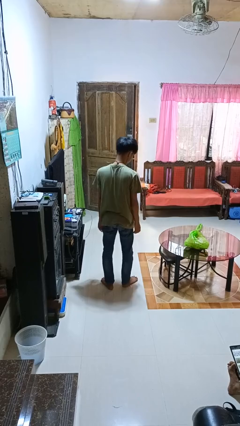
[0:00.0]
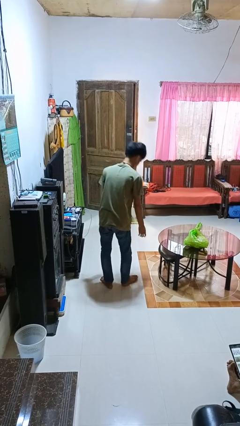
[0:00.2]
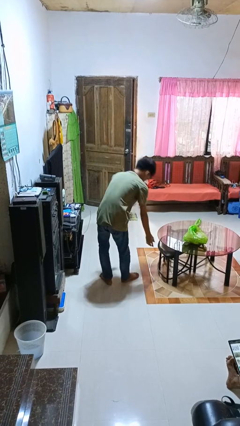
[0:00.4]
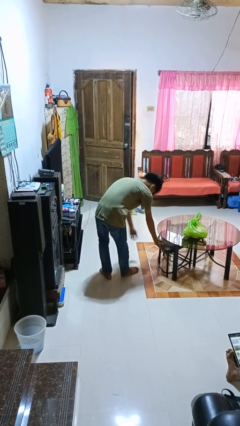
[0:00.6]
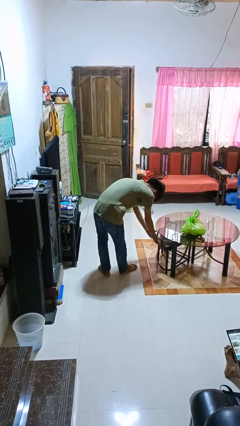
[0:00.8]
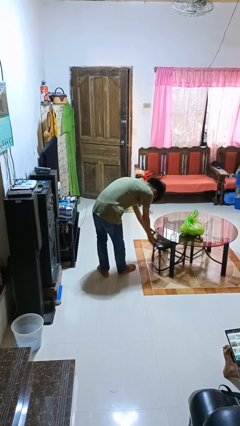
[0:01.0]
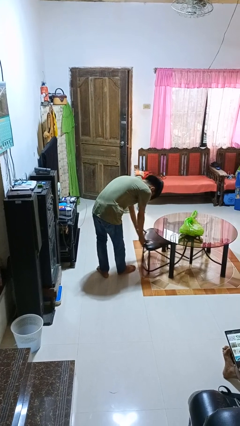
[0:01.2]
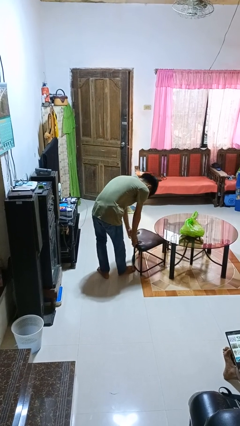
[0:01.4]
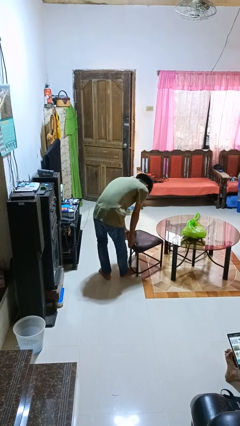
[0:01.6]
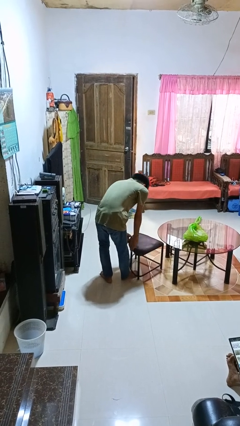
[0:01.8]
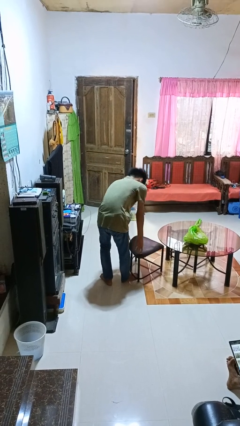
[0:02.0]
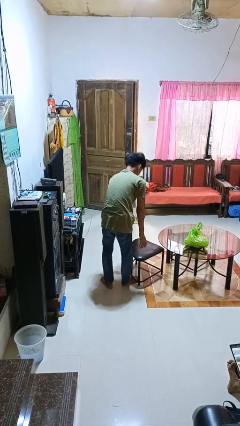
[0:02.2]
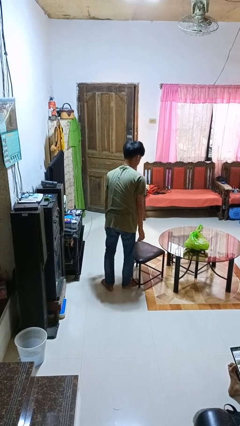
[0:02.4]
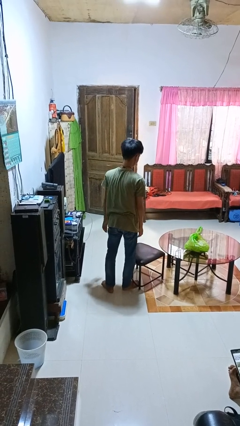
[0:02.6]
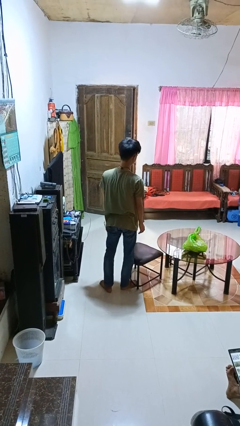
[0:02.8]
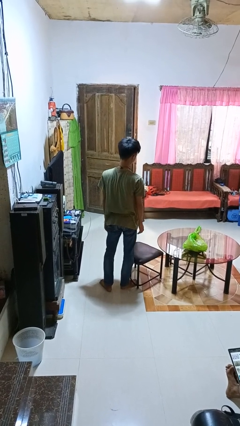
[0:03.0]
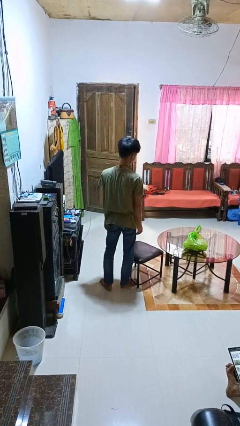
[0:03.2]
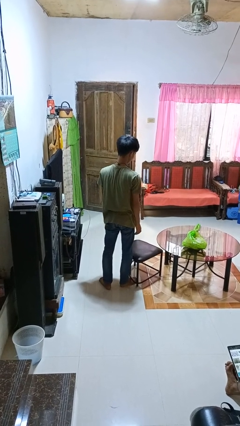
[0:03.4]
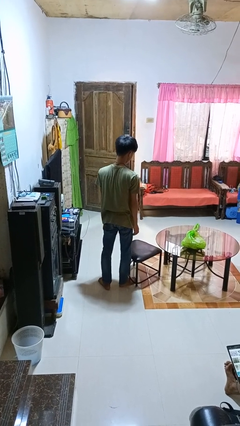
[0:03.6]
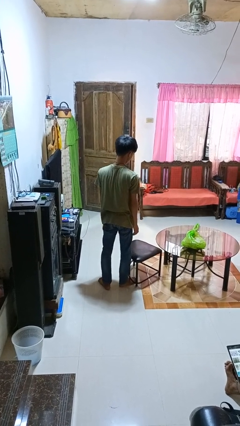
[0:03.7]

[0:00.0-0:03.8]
person pulls out chair

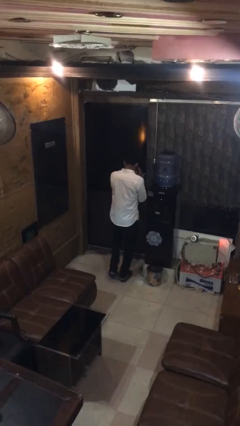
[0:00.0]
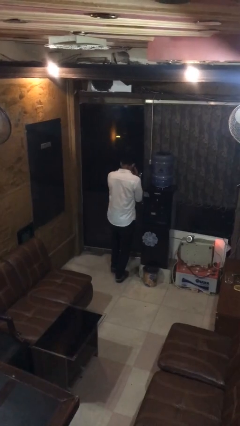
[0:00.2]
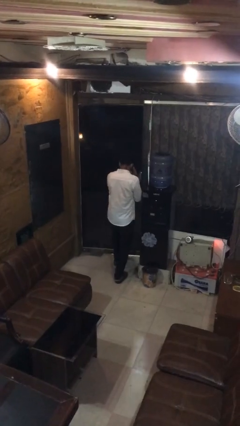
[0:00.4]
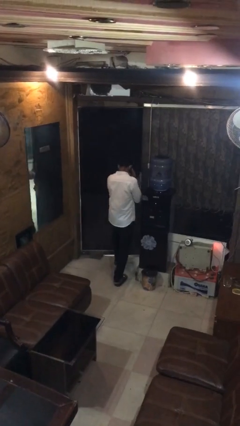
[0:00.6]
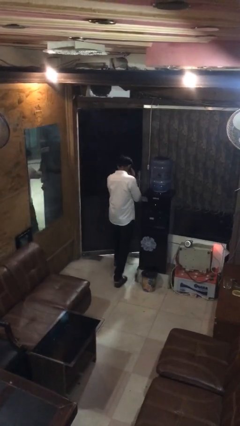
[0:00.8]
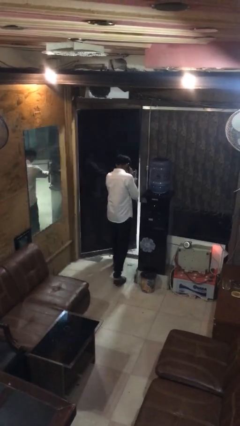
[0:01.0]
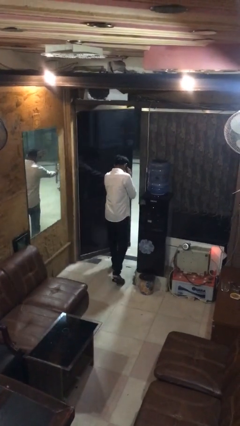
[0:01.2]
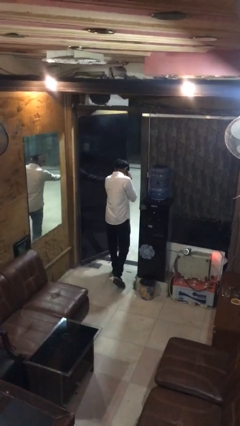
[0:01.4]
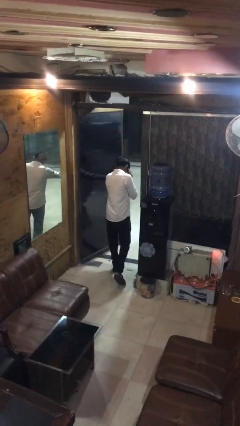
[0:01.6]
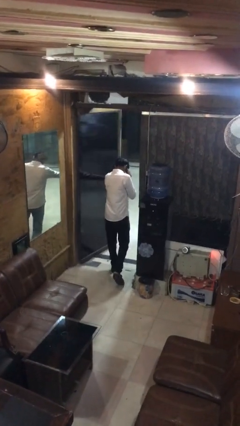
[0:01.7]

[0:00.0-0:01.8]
person opens facility door

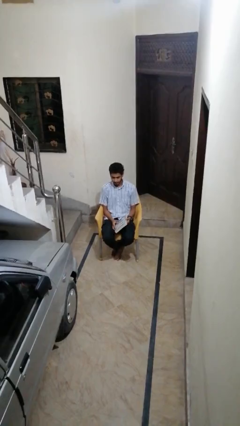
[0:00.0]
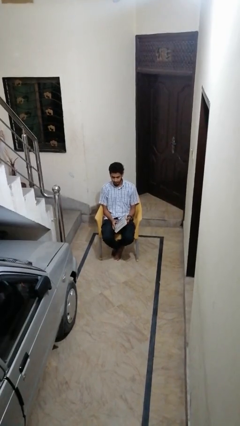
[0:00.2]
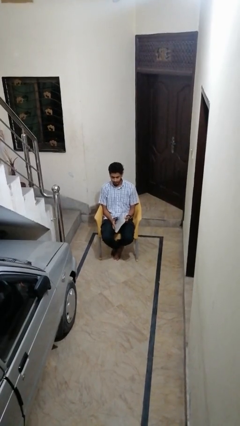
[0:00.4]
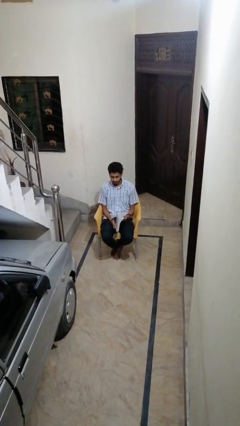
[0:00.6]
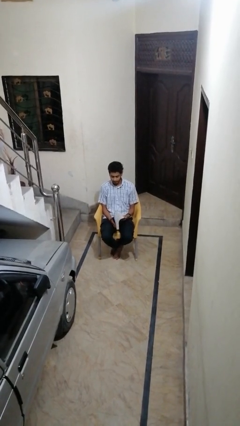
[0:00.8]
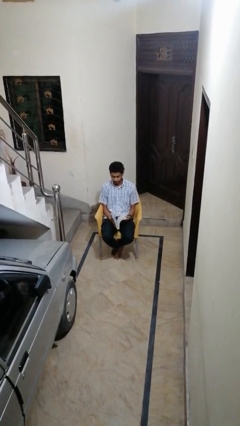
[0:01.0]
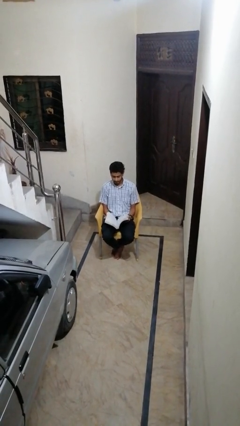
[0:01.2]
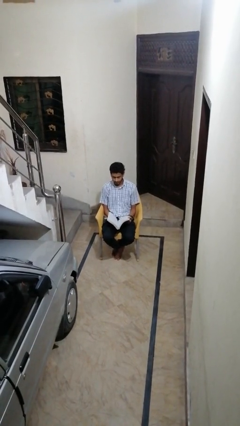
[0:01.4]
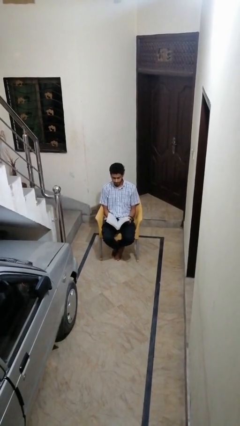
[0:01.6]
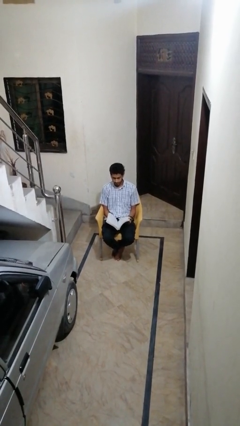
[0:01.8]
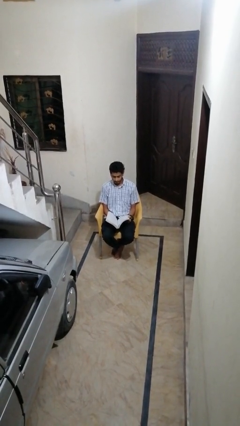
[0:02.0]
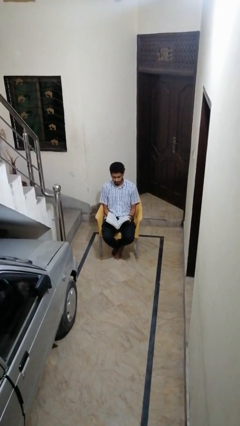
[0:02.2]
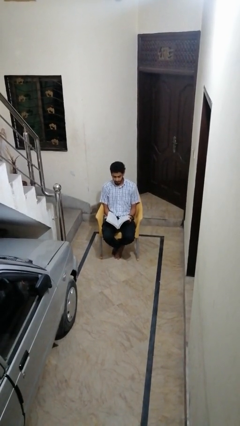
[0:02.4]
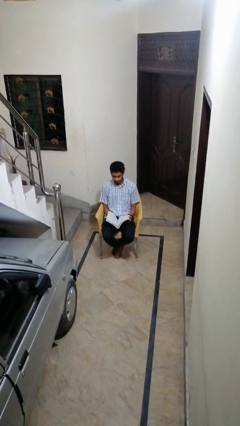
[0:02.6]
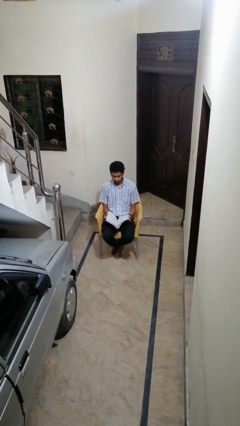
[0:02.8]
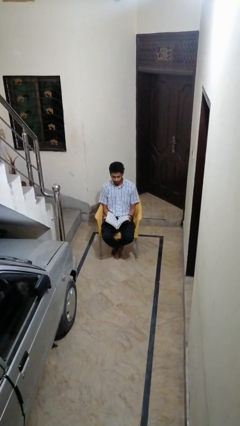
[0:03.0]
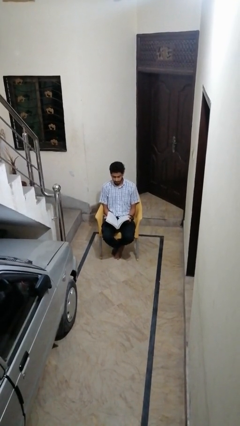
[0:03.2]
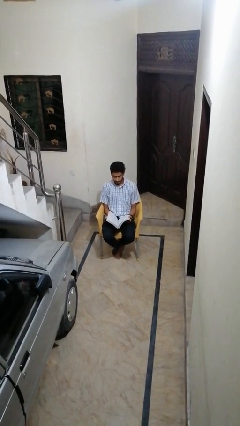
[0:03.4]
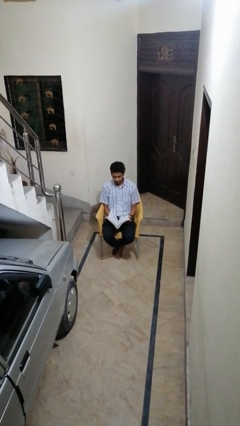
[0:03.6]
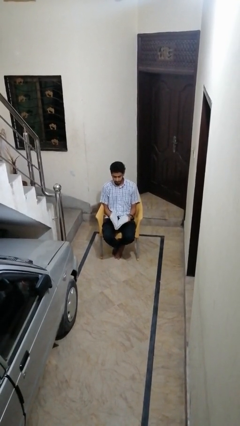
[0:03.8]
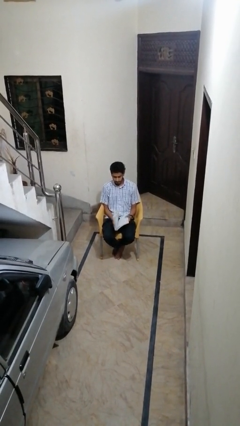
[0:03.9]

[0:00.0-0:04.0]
person reads book

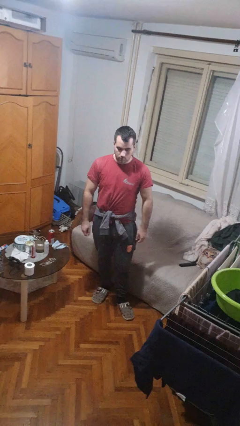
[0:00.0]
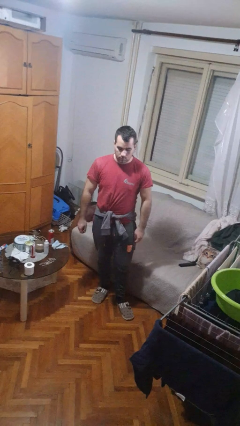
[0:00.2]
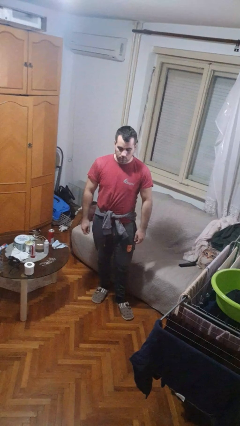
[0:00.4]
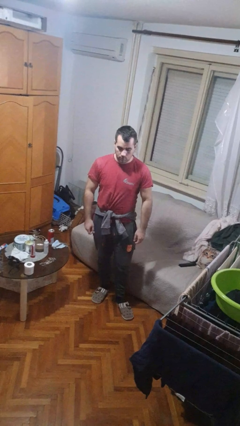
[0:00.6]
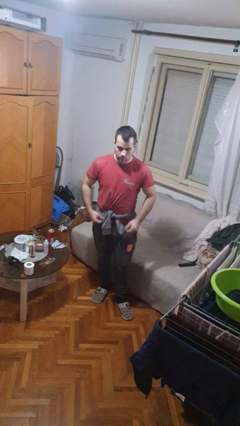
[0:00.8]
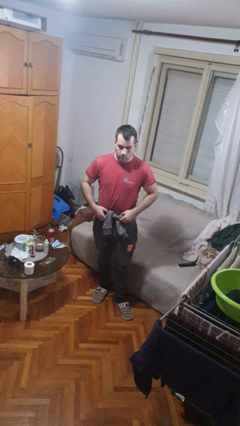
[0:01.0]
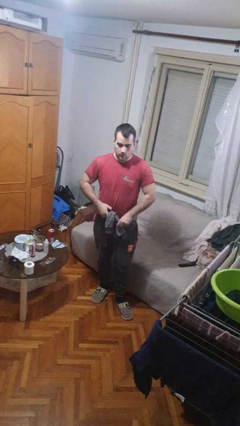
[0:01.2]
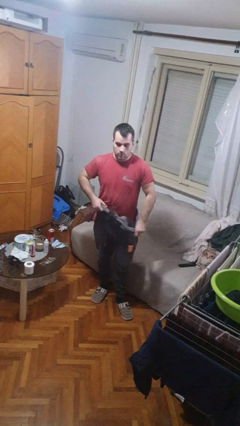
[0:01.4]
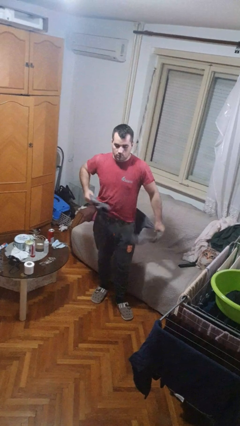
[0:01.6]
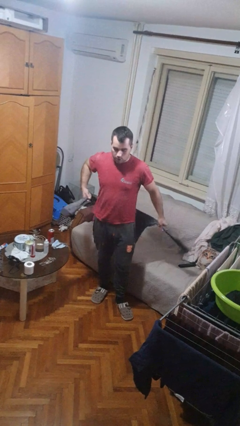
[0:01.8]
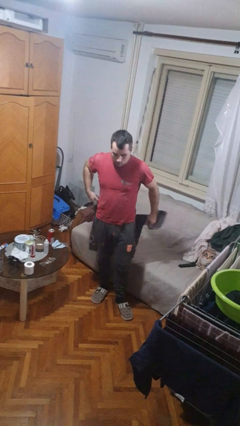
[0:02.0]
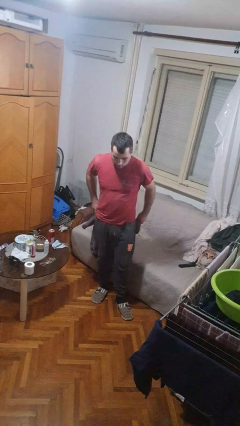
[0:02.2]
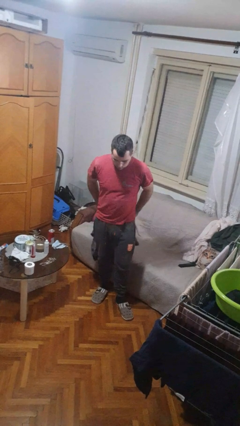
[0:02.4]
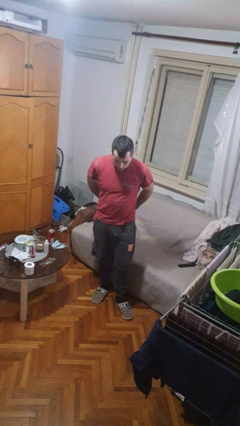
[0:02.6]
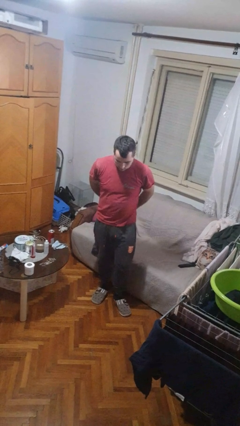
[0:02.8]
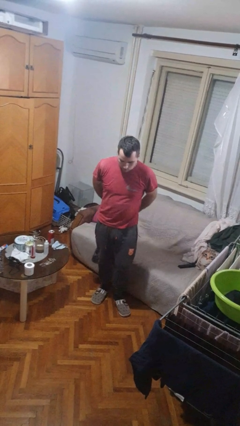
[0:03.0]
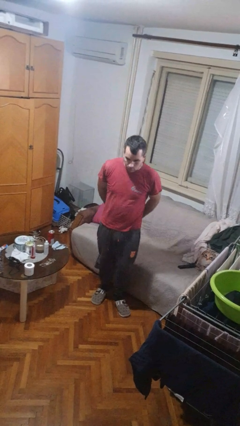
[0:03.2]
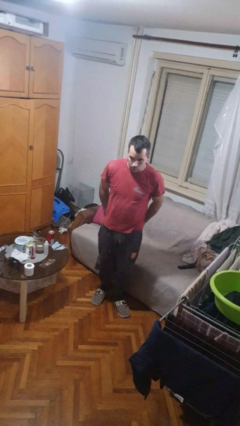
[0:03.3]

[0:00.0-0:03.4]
person unties jacket around waist

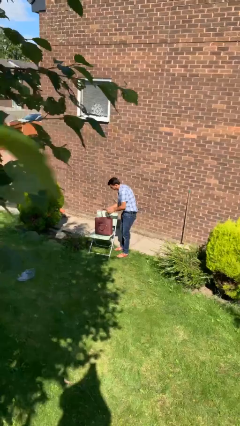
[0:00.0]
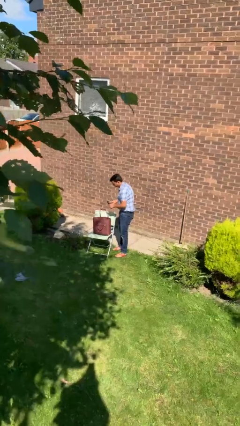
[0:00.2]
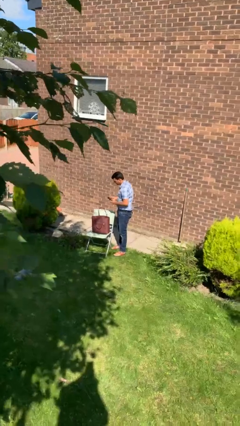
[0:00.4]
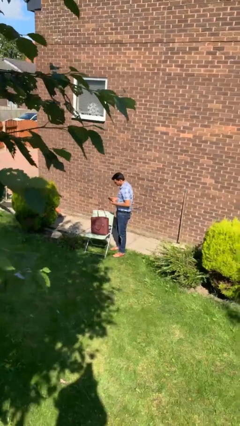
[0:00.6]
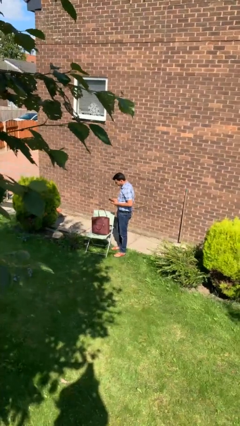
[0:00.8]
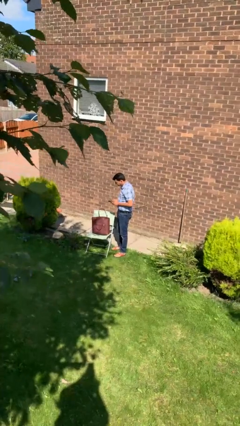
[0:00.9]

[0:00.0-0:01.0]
person takes object from purse

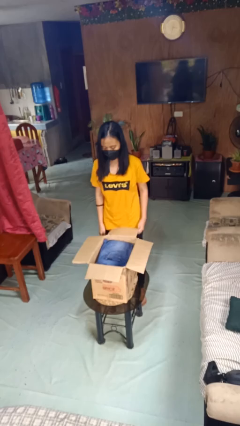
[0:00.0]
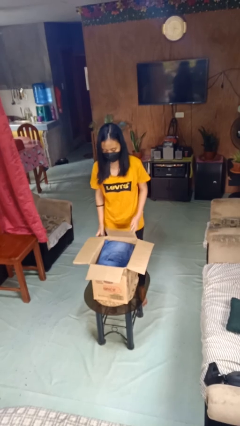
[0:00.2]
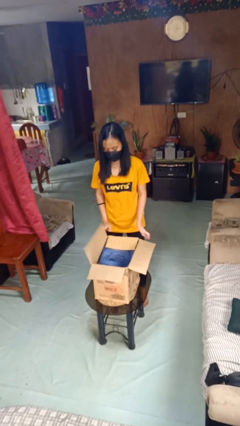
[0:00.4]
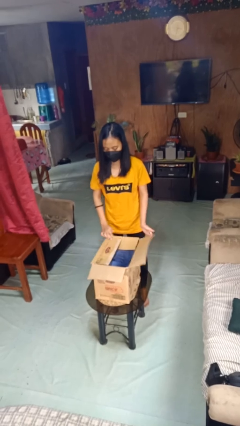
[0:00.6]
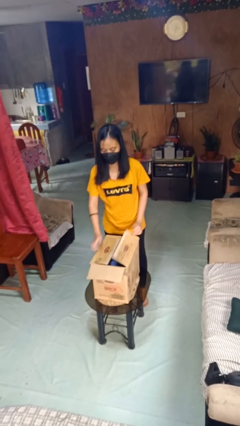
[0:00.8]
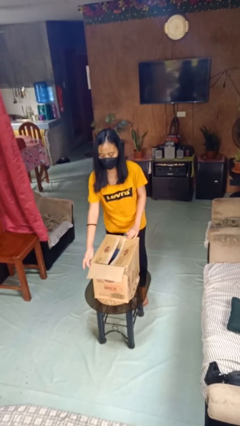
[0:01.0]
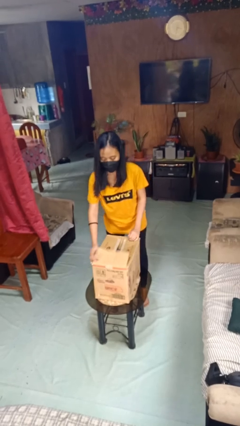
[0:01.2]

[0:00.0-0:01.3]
person closes box

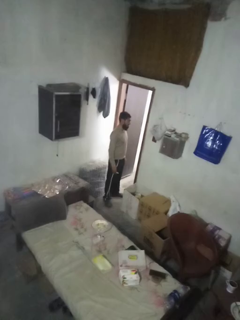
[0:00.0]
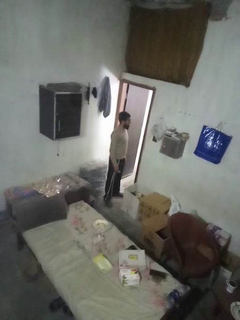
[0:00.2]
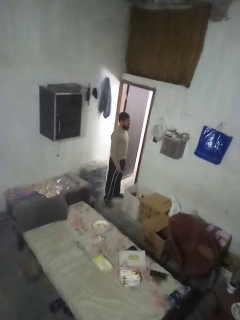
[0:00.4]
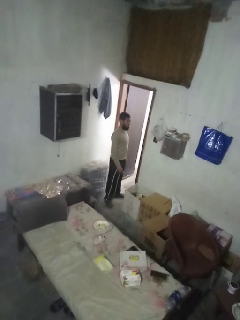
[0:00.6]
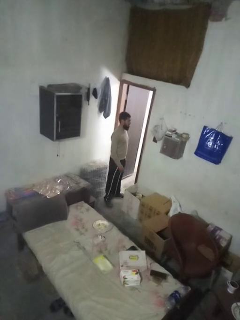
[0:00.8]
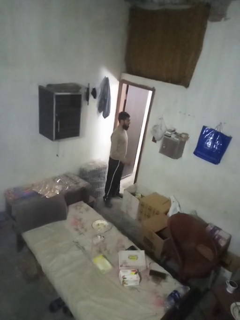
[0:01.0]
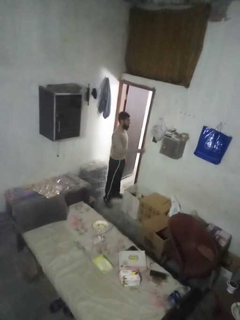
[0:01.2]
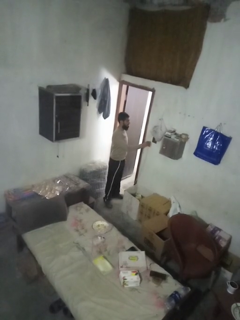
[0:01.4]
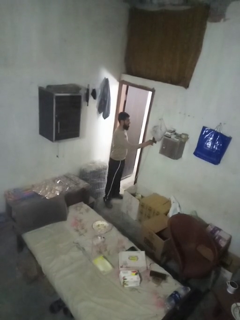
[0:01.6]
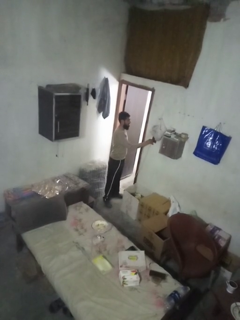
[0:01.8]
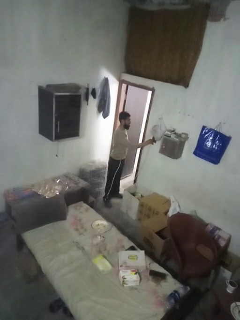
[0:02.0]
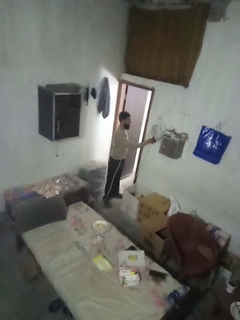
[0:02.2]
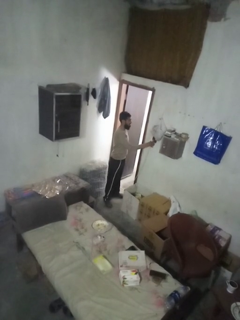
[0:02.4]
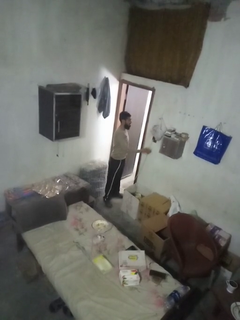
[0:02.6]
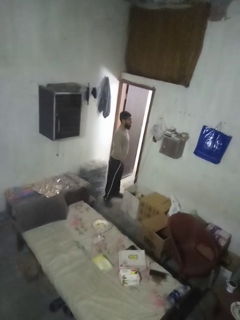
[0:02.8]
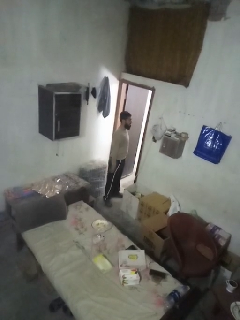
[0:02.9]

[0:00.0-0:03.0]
person plugs into electrical socket

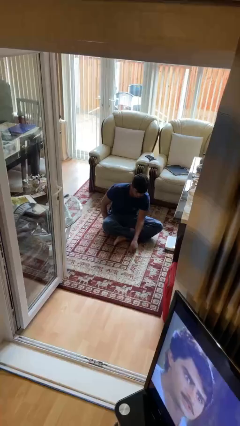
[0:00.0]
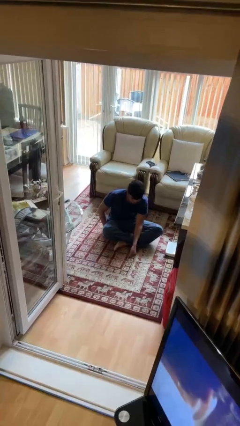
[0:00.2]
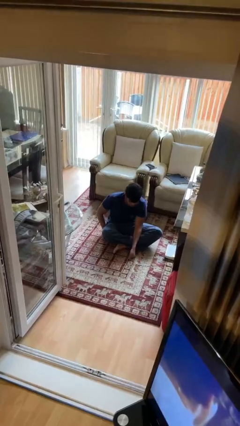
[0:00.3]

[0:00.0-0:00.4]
person stands up from floor
